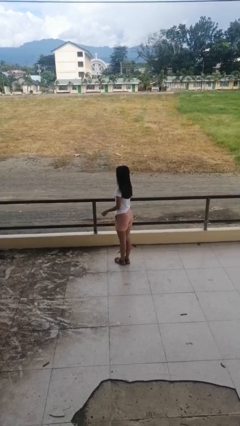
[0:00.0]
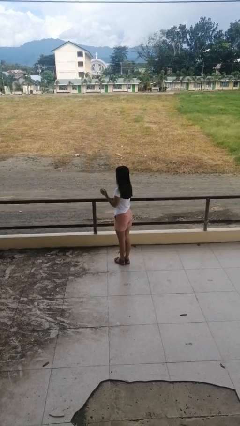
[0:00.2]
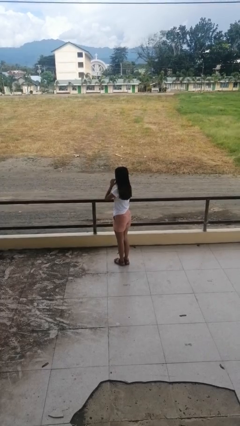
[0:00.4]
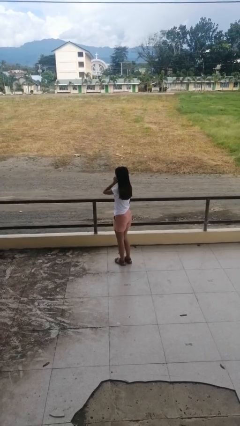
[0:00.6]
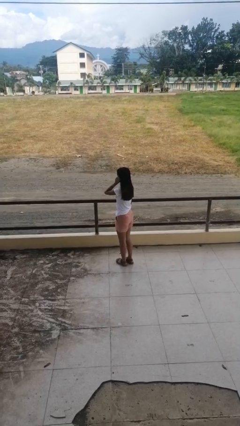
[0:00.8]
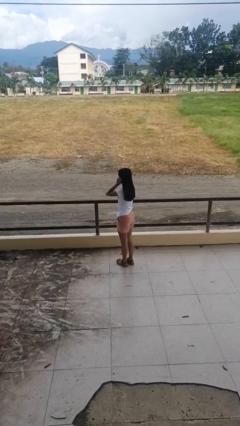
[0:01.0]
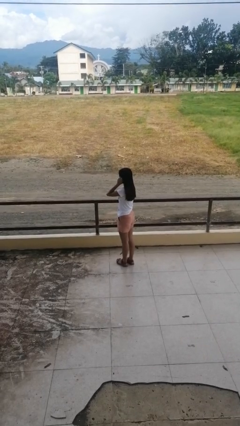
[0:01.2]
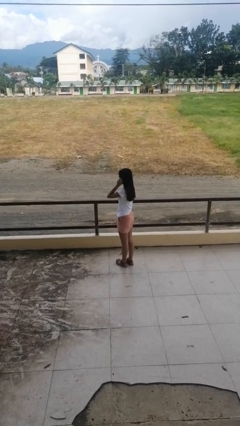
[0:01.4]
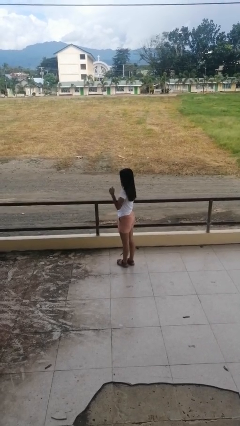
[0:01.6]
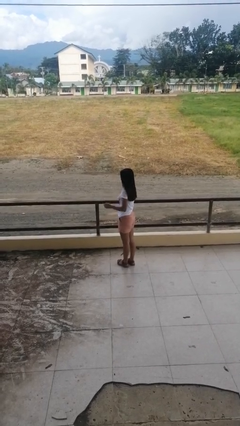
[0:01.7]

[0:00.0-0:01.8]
person touches earlobe

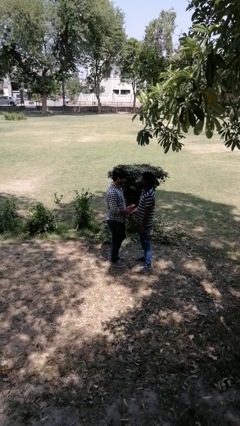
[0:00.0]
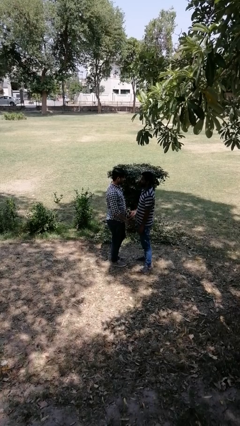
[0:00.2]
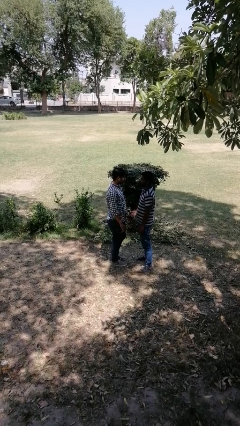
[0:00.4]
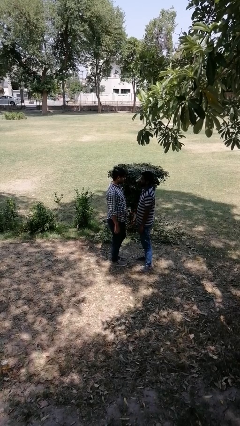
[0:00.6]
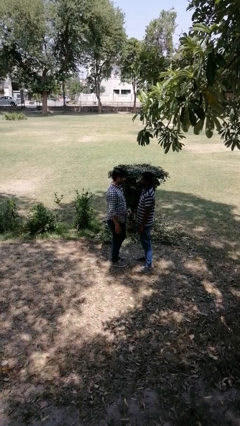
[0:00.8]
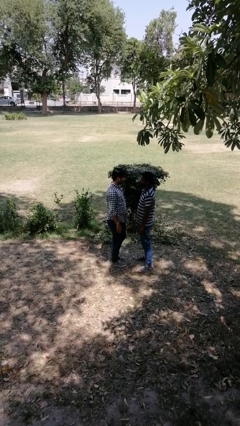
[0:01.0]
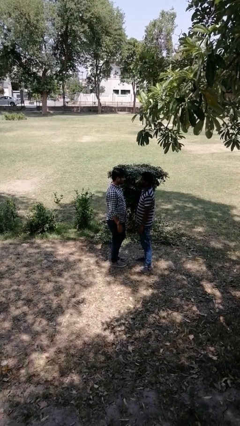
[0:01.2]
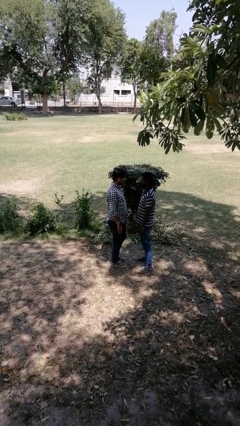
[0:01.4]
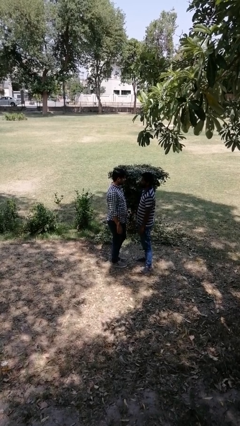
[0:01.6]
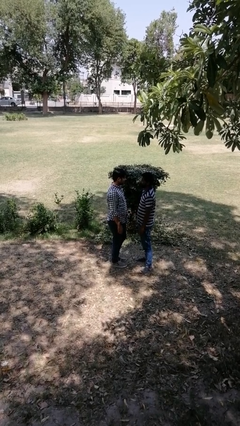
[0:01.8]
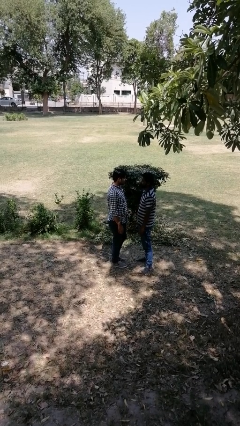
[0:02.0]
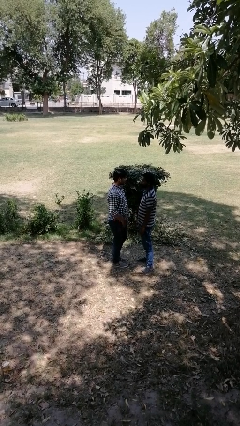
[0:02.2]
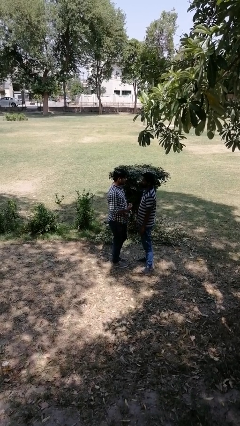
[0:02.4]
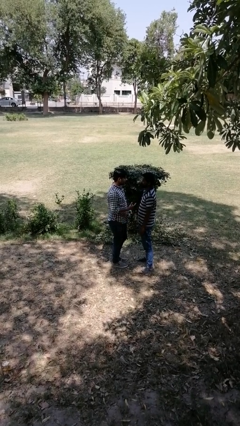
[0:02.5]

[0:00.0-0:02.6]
person highfives hand

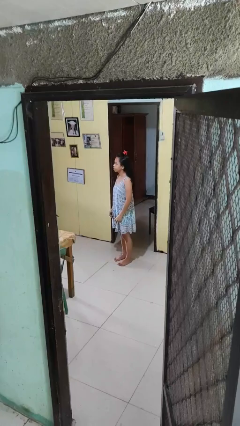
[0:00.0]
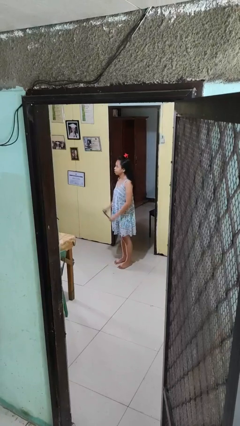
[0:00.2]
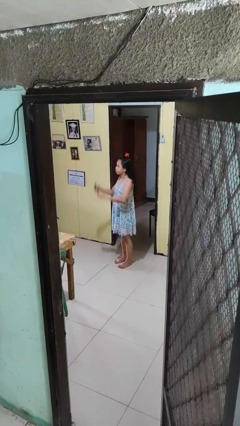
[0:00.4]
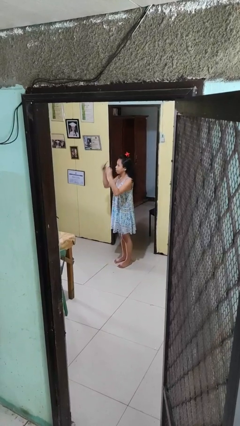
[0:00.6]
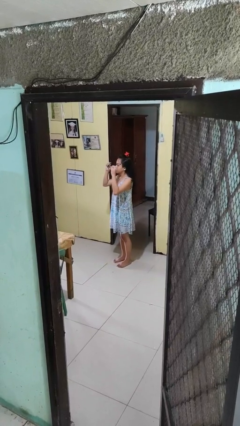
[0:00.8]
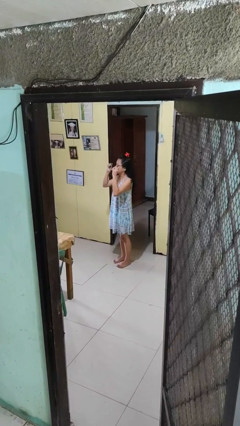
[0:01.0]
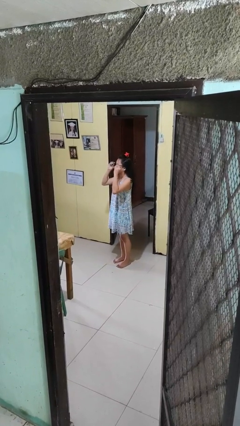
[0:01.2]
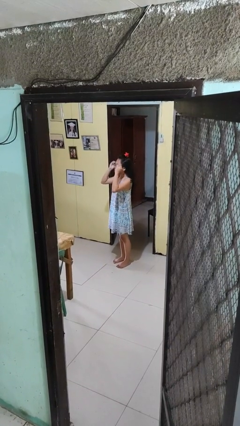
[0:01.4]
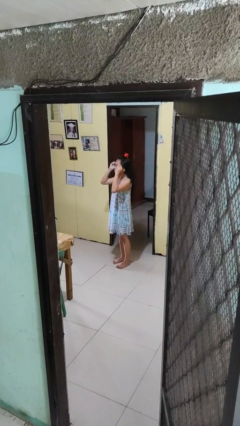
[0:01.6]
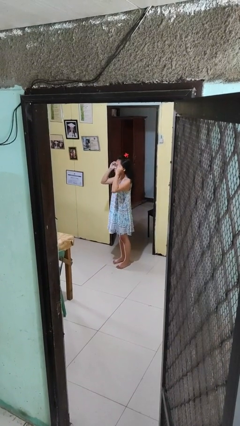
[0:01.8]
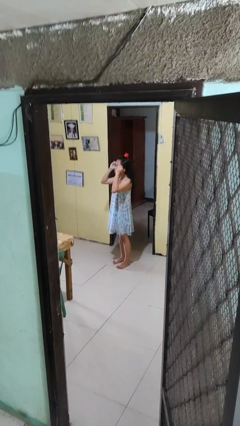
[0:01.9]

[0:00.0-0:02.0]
person puts on glasses

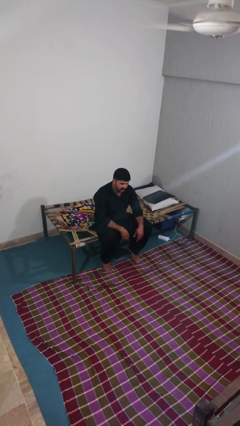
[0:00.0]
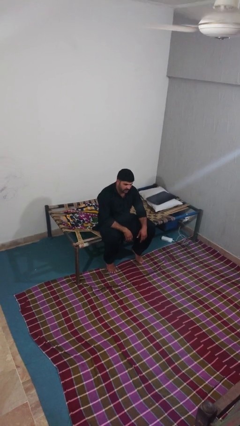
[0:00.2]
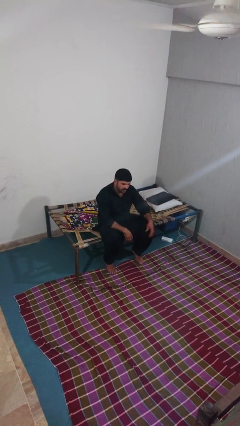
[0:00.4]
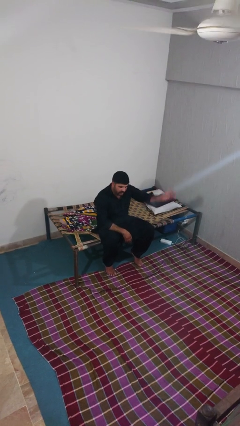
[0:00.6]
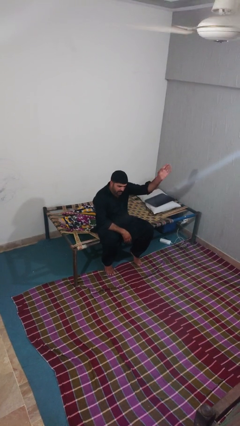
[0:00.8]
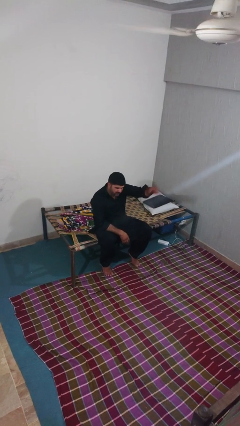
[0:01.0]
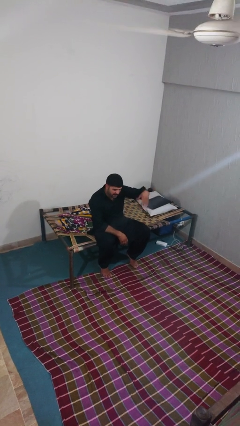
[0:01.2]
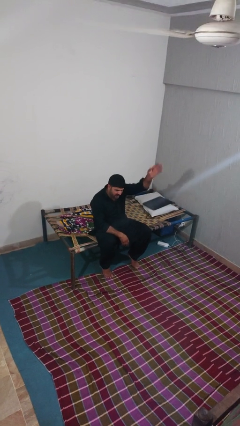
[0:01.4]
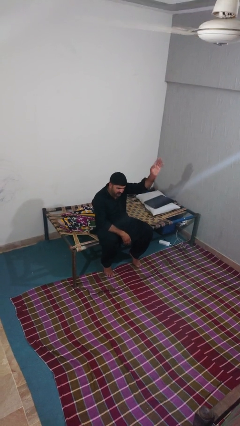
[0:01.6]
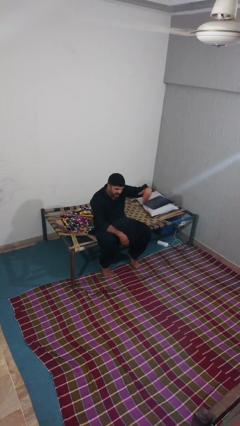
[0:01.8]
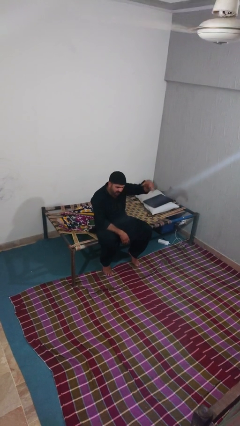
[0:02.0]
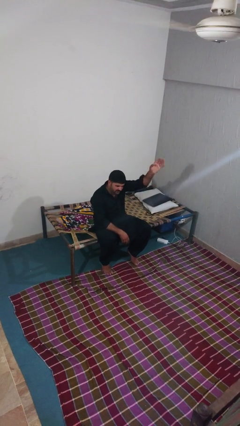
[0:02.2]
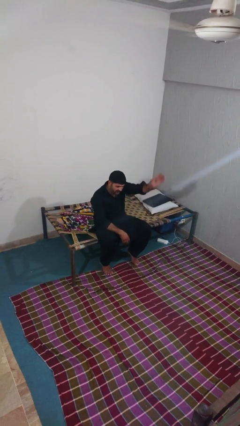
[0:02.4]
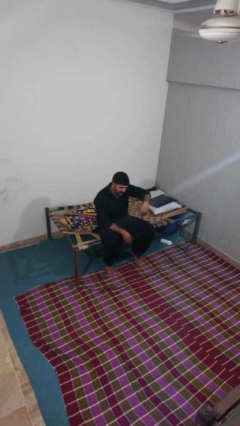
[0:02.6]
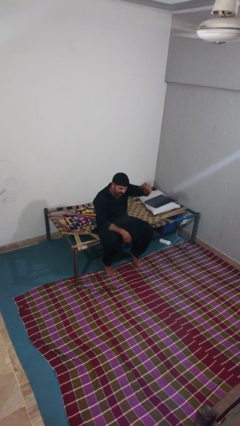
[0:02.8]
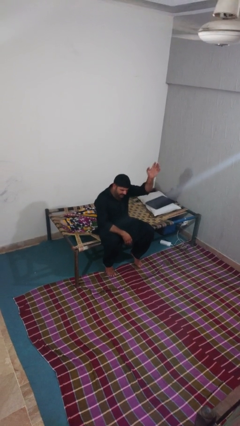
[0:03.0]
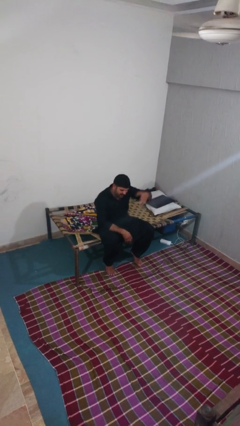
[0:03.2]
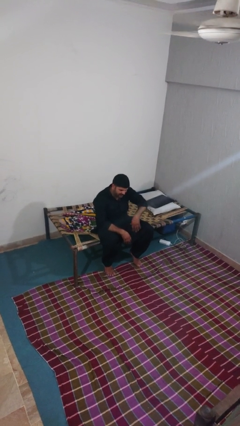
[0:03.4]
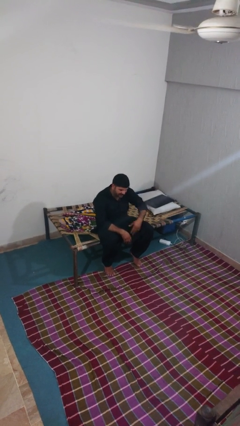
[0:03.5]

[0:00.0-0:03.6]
person gestures come here

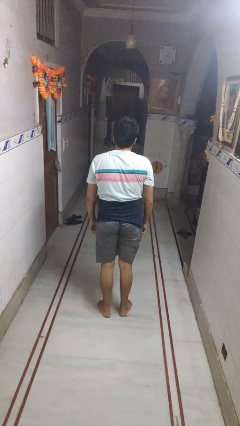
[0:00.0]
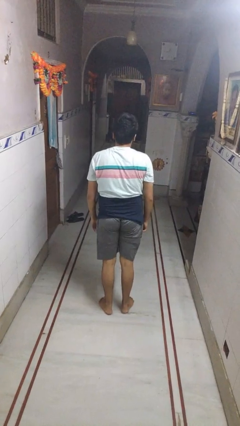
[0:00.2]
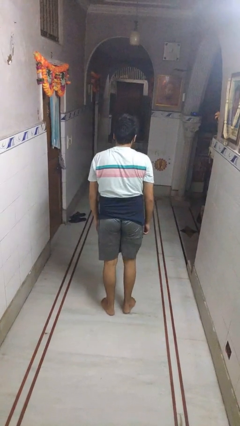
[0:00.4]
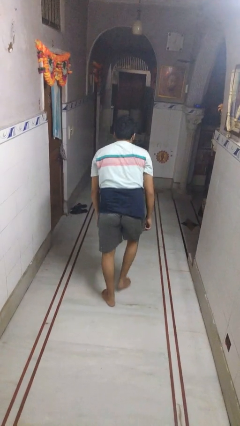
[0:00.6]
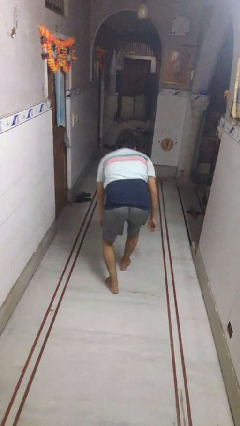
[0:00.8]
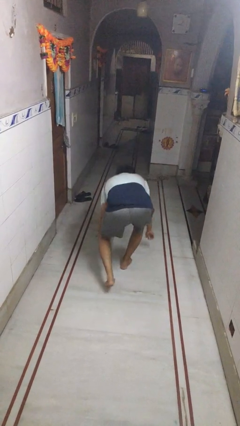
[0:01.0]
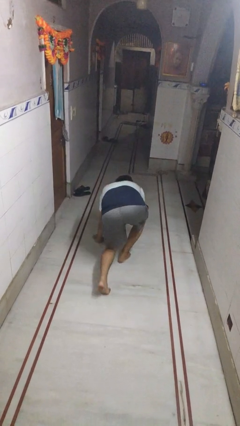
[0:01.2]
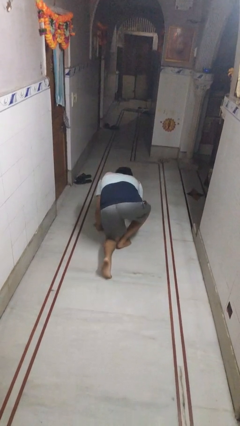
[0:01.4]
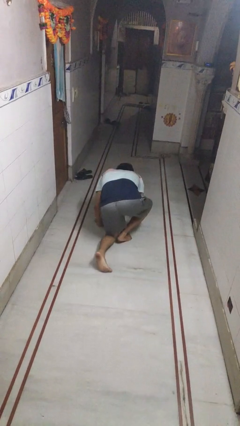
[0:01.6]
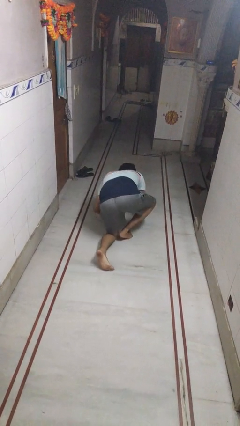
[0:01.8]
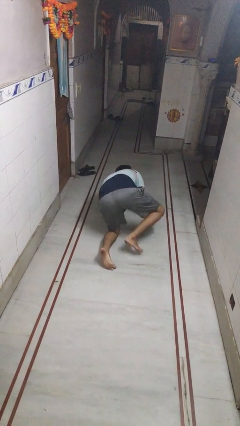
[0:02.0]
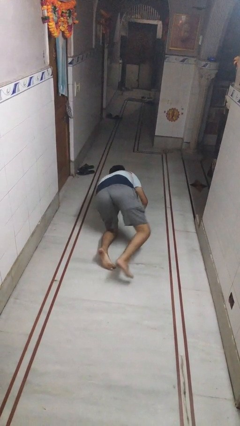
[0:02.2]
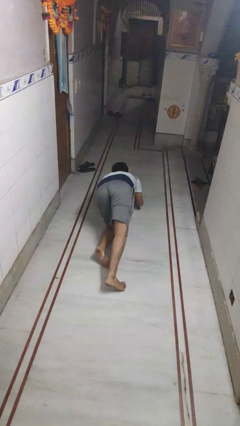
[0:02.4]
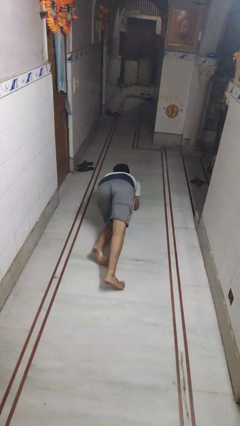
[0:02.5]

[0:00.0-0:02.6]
person exercises with plank

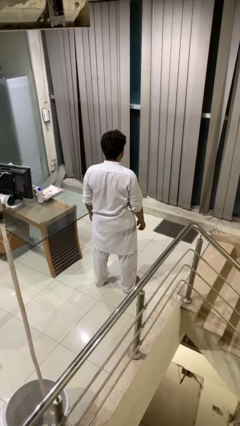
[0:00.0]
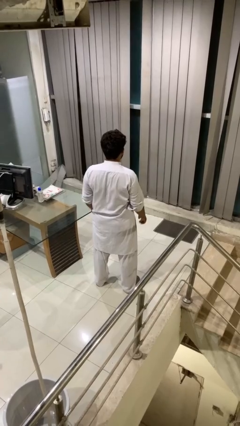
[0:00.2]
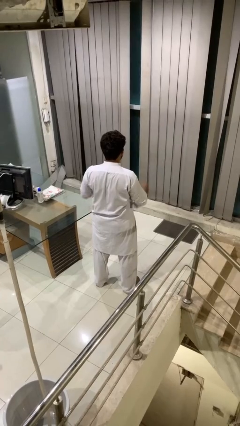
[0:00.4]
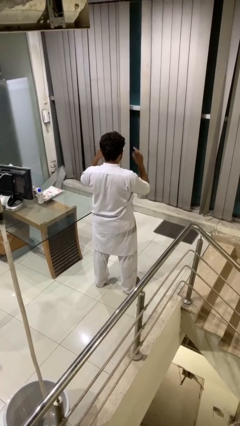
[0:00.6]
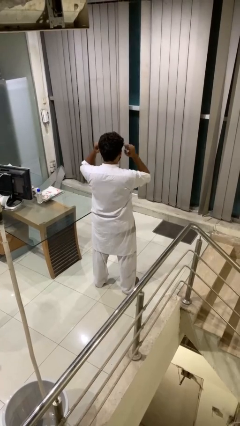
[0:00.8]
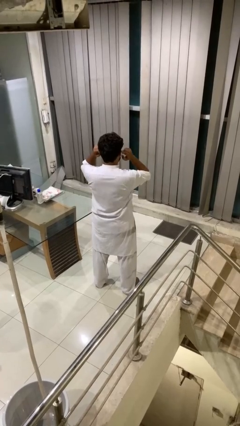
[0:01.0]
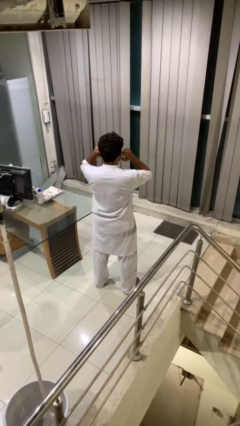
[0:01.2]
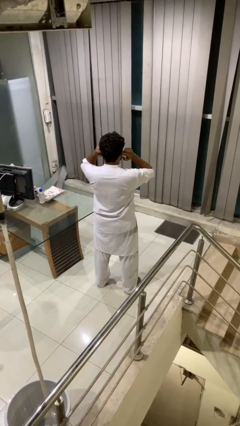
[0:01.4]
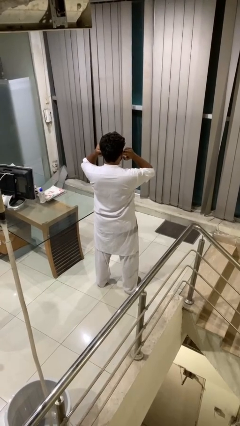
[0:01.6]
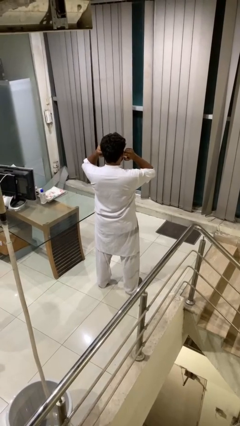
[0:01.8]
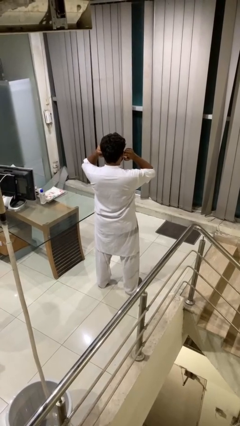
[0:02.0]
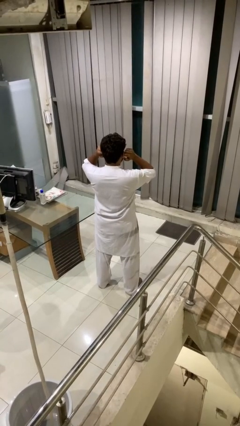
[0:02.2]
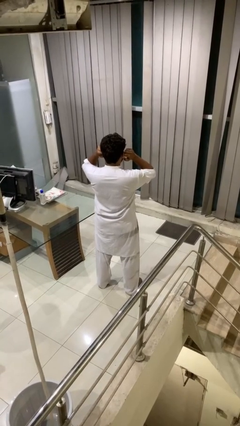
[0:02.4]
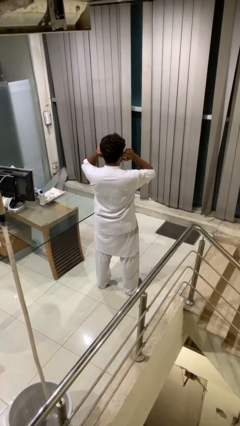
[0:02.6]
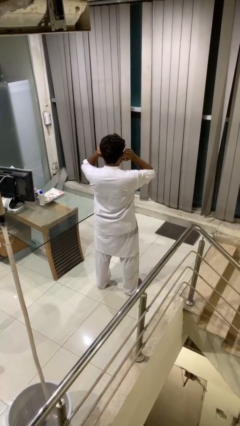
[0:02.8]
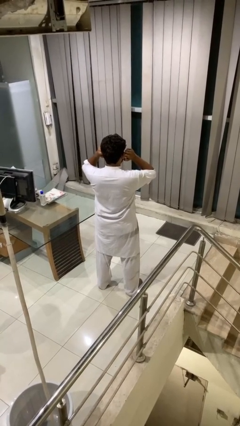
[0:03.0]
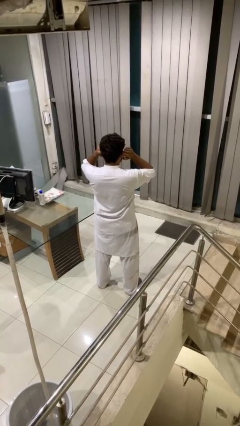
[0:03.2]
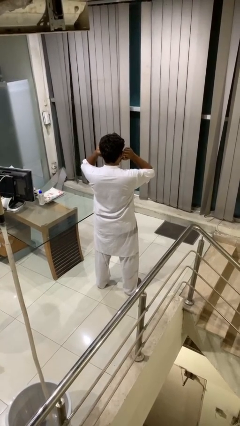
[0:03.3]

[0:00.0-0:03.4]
person puts fingers in ear

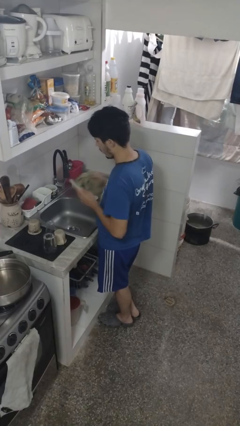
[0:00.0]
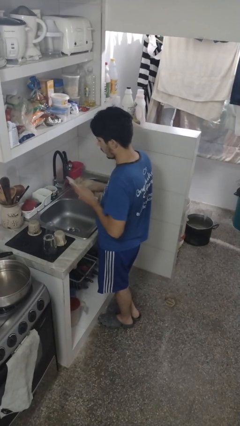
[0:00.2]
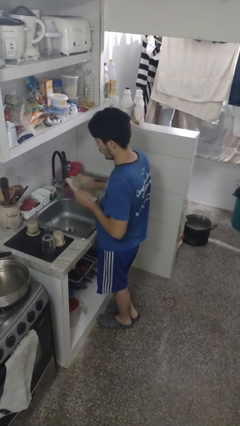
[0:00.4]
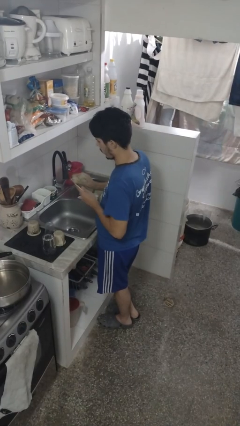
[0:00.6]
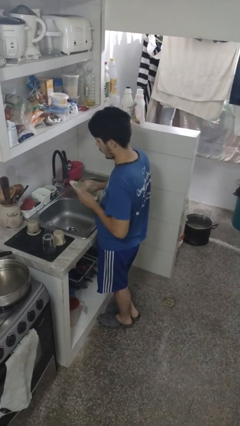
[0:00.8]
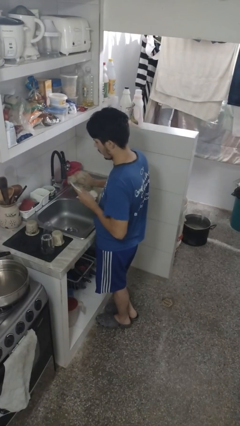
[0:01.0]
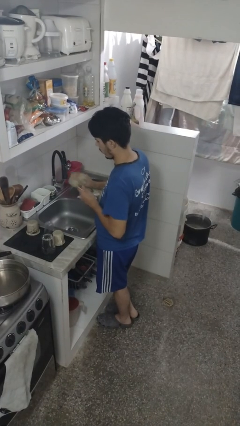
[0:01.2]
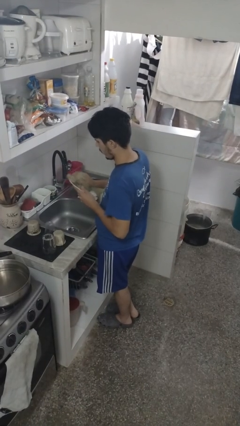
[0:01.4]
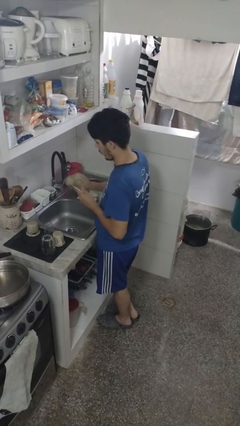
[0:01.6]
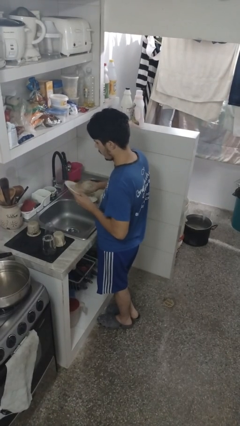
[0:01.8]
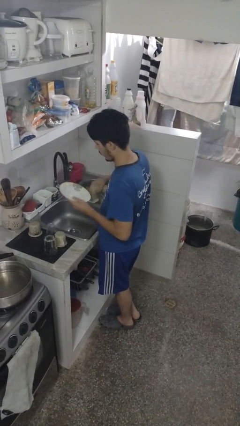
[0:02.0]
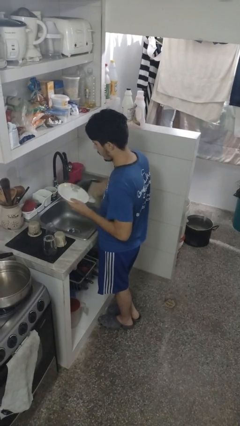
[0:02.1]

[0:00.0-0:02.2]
person dries dish
